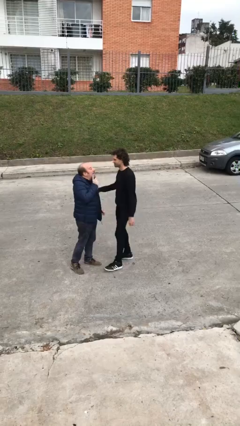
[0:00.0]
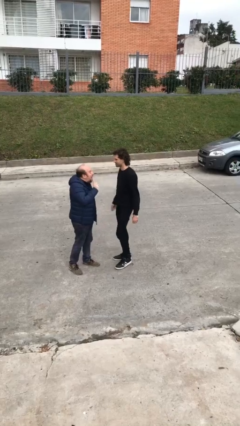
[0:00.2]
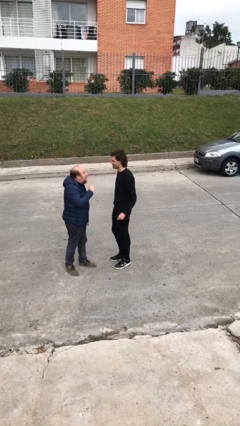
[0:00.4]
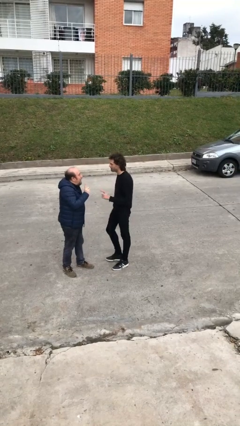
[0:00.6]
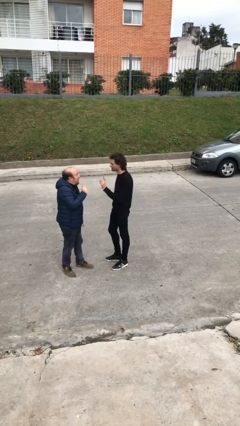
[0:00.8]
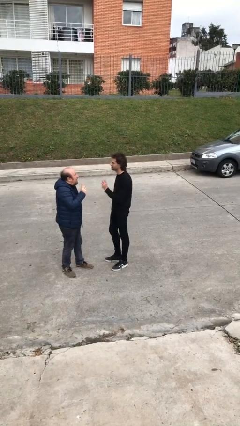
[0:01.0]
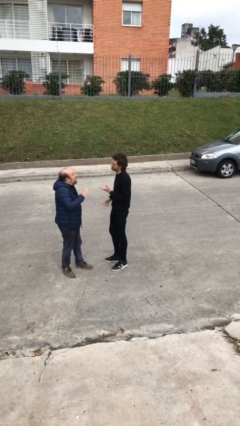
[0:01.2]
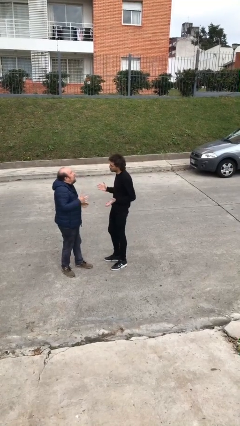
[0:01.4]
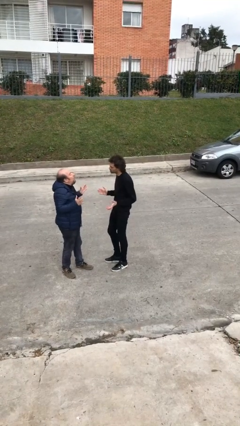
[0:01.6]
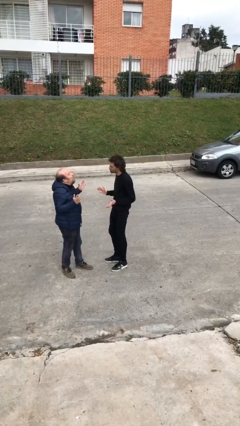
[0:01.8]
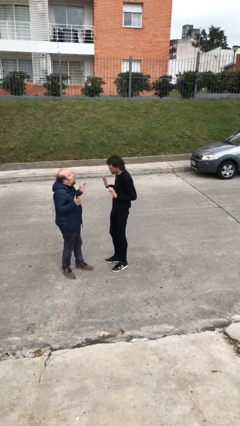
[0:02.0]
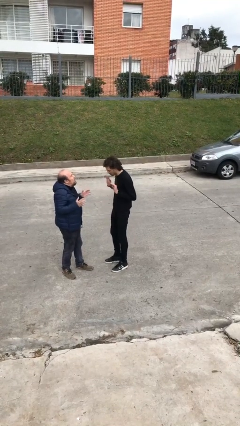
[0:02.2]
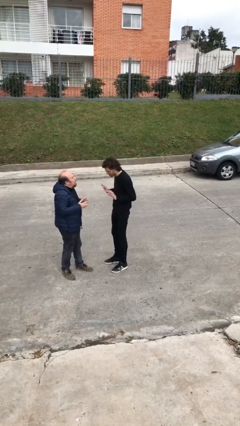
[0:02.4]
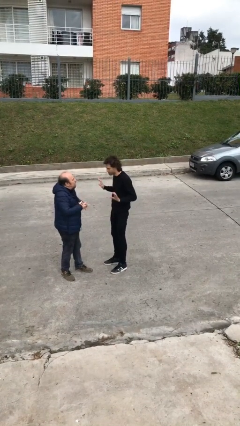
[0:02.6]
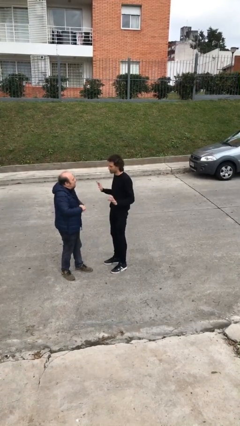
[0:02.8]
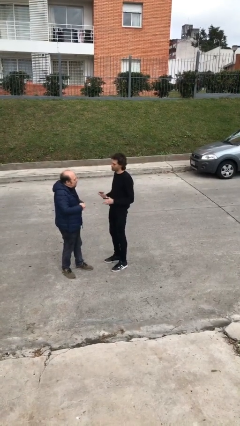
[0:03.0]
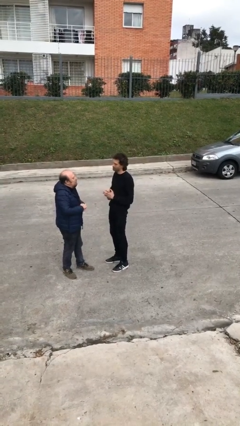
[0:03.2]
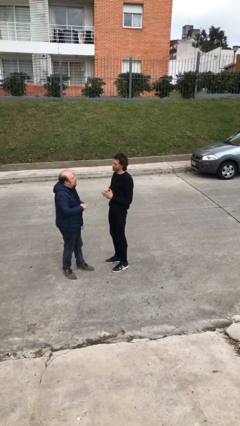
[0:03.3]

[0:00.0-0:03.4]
person talks to person

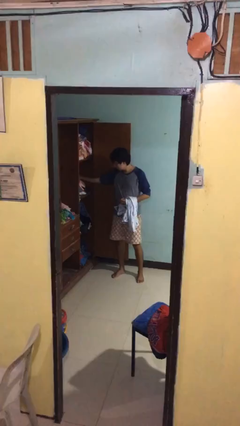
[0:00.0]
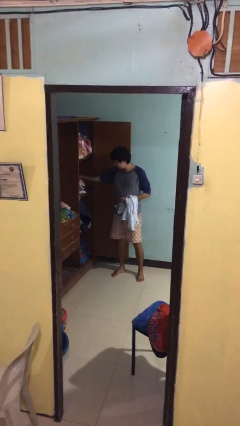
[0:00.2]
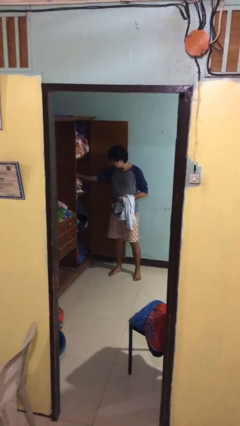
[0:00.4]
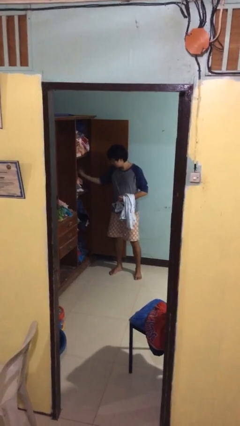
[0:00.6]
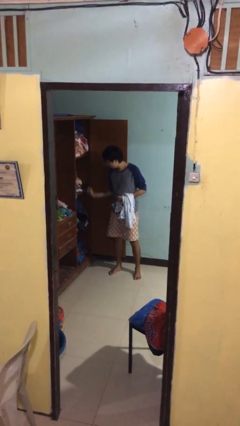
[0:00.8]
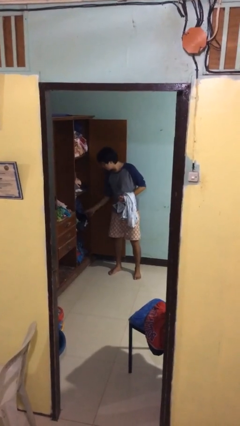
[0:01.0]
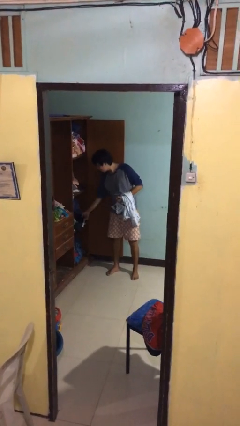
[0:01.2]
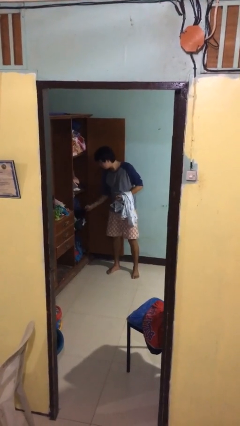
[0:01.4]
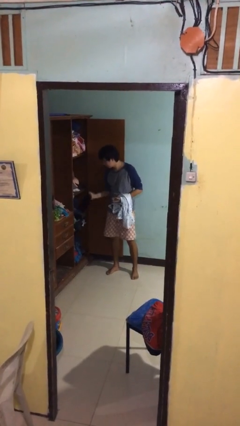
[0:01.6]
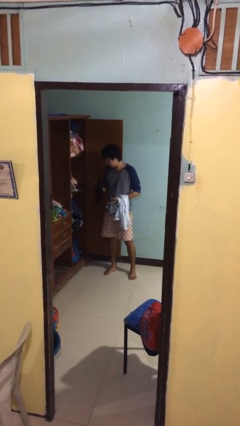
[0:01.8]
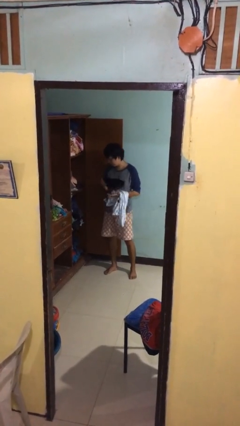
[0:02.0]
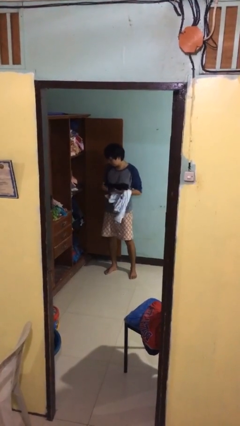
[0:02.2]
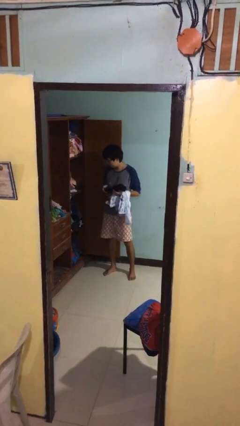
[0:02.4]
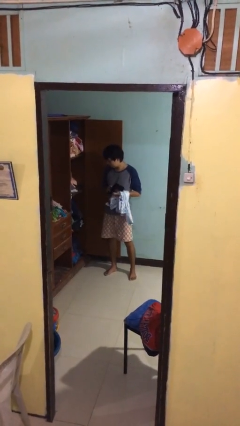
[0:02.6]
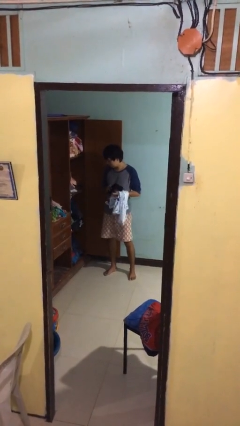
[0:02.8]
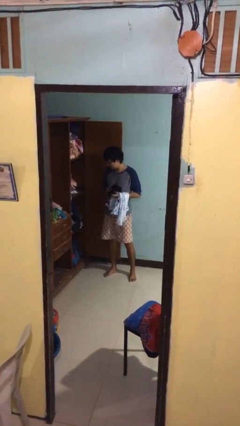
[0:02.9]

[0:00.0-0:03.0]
person takes clothes from dresser

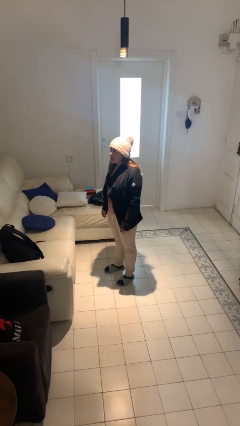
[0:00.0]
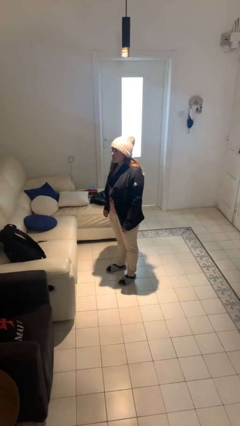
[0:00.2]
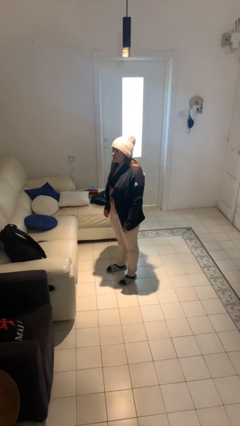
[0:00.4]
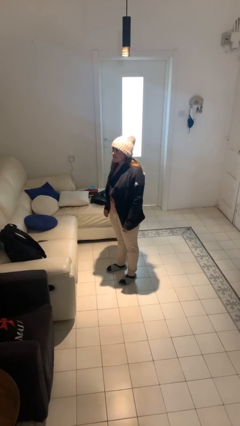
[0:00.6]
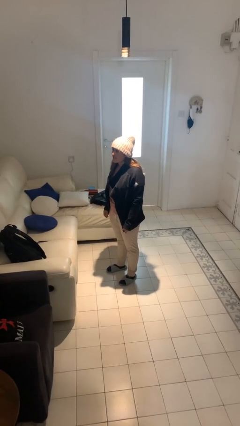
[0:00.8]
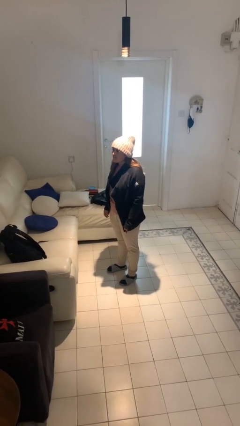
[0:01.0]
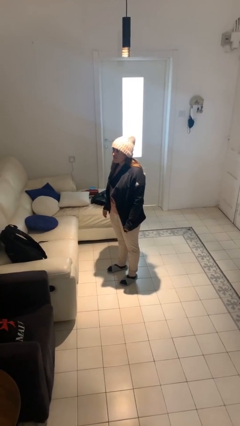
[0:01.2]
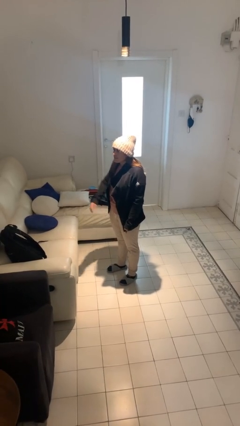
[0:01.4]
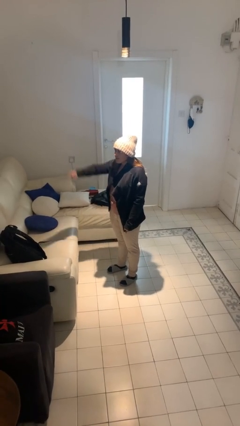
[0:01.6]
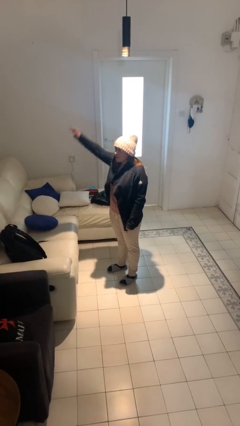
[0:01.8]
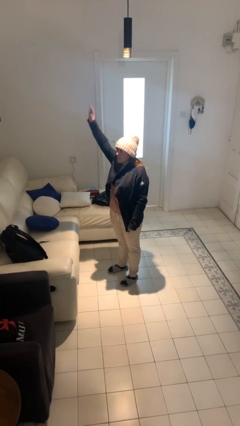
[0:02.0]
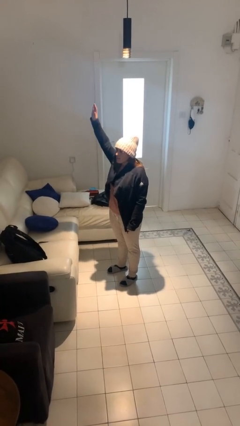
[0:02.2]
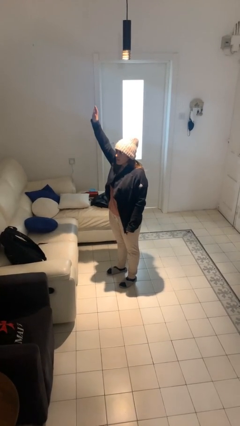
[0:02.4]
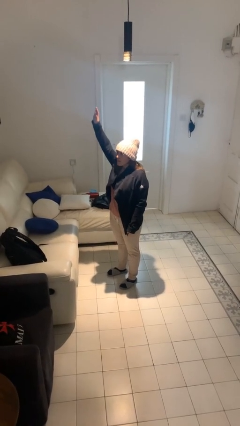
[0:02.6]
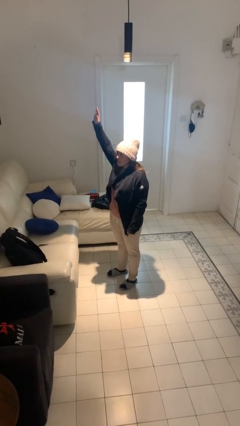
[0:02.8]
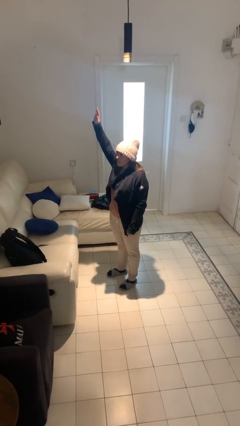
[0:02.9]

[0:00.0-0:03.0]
person gestures raise hand

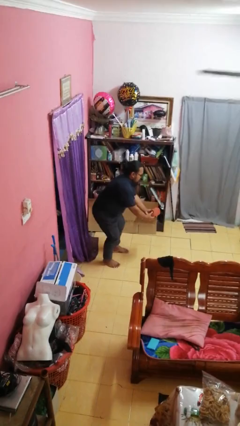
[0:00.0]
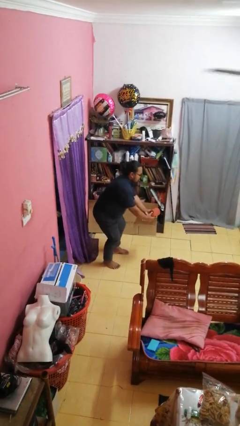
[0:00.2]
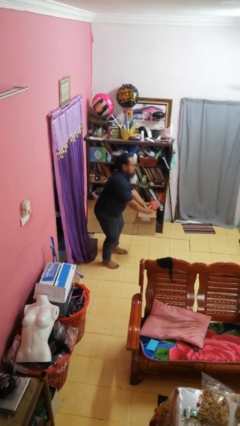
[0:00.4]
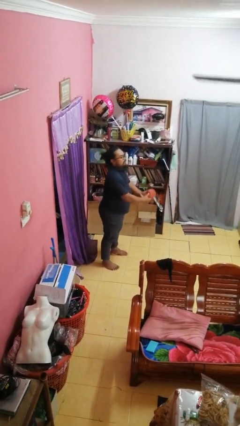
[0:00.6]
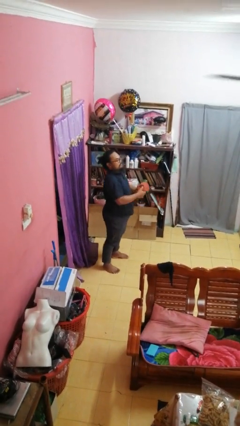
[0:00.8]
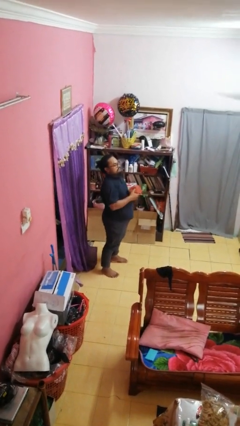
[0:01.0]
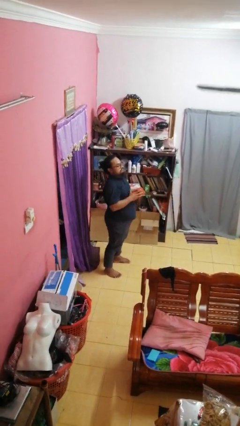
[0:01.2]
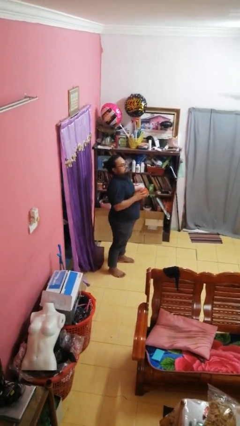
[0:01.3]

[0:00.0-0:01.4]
person catches dropped object

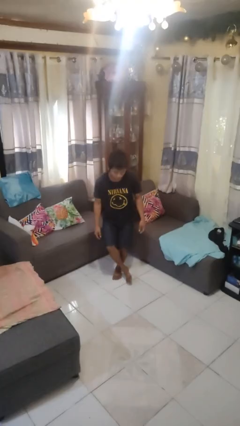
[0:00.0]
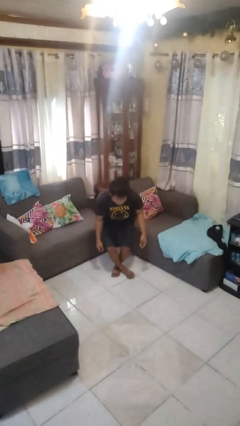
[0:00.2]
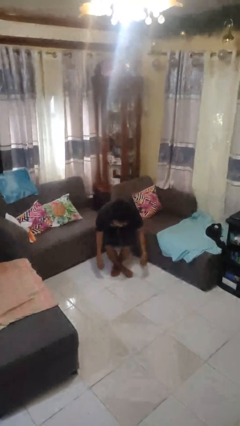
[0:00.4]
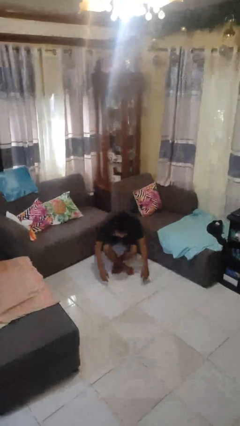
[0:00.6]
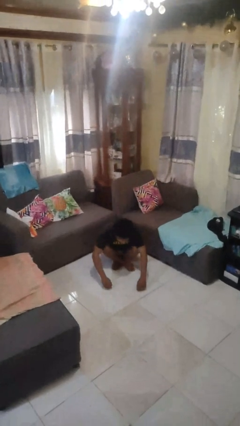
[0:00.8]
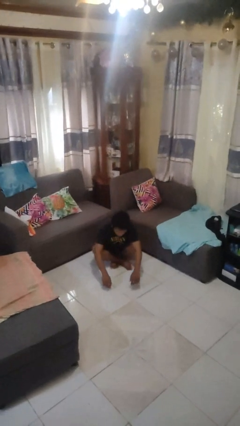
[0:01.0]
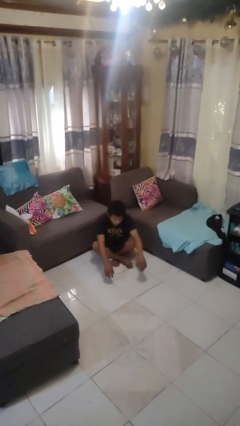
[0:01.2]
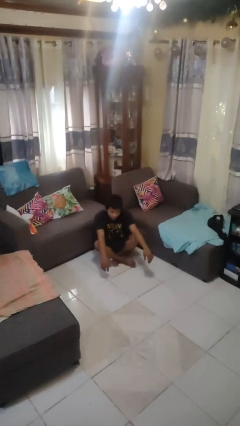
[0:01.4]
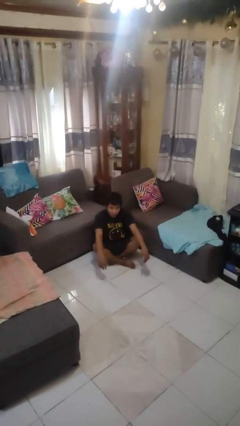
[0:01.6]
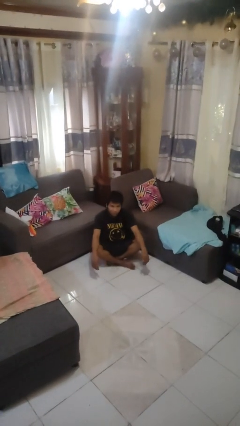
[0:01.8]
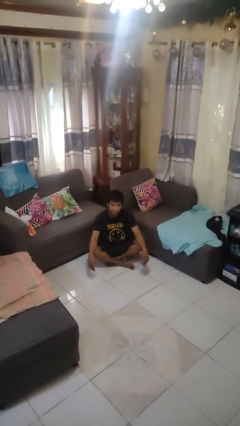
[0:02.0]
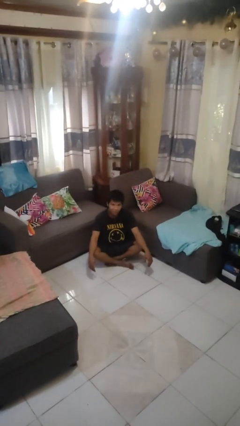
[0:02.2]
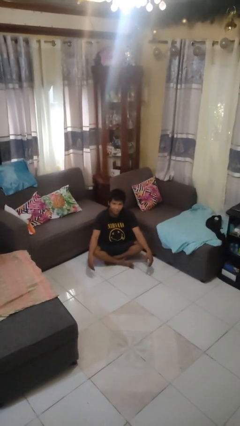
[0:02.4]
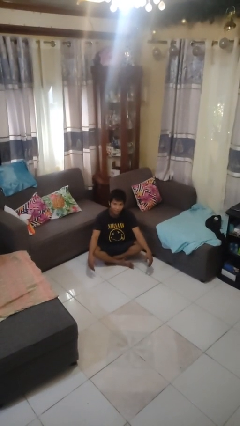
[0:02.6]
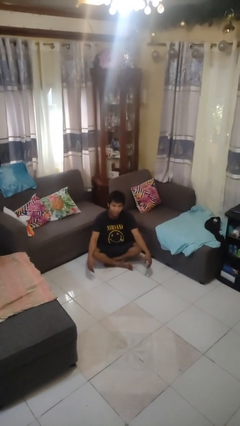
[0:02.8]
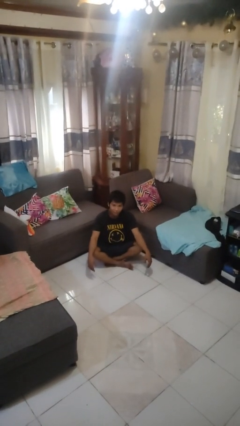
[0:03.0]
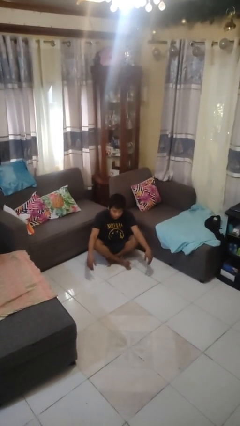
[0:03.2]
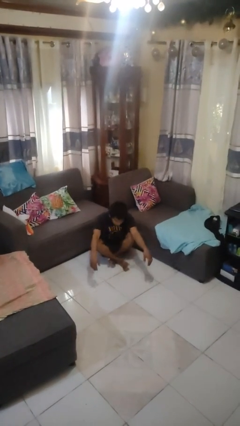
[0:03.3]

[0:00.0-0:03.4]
person sits crisscross

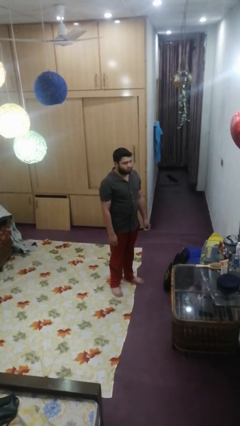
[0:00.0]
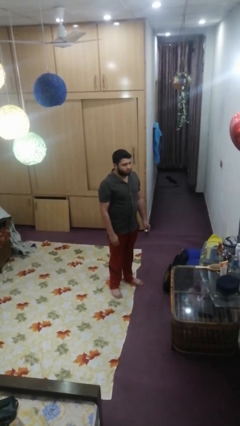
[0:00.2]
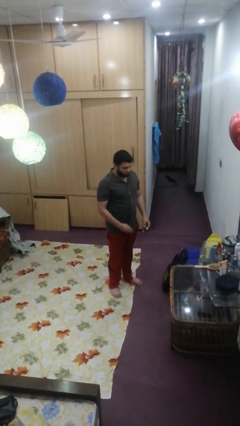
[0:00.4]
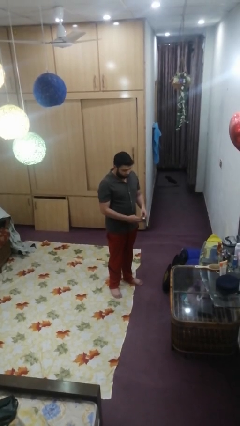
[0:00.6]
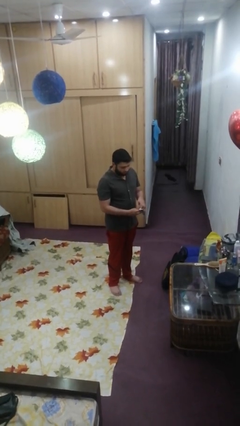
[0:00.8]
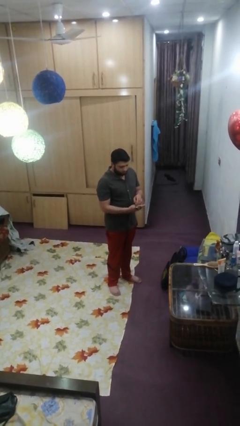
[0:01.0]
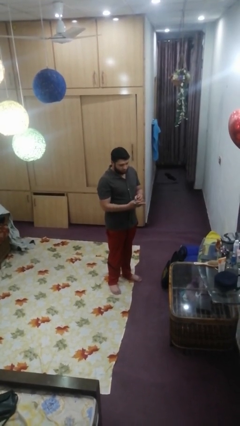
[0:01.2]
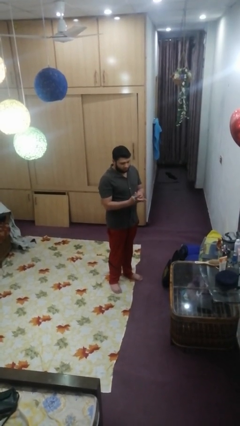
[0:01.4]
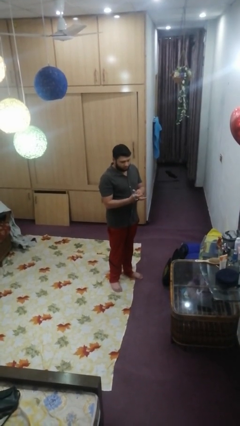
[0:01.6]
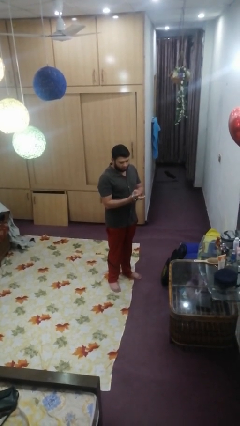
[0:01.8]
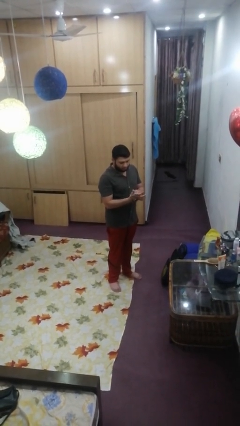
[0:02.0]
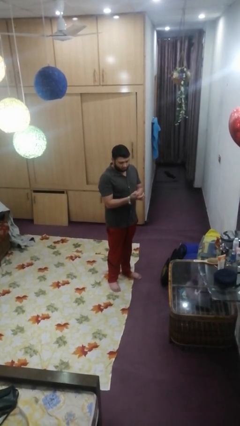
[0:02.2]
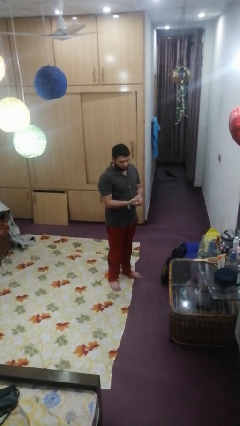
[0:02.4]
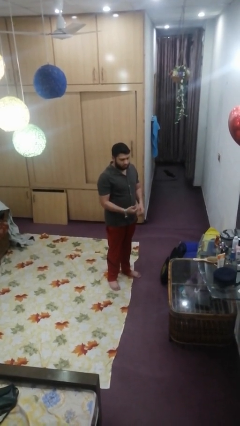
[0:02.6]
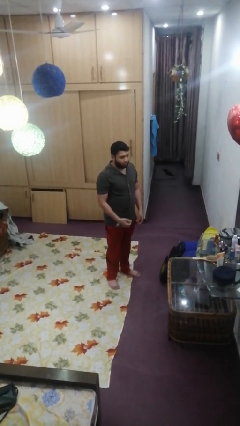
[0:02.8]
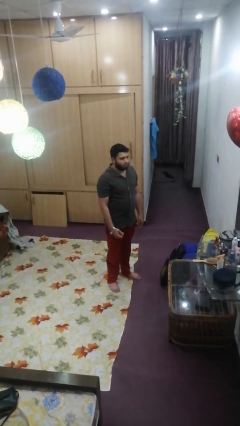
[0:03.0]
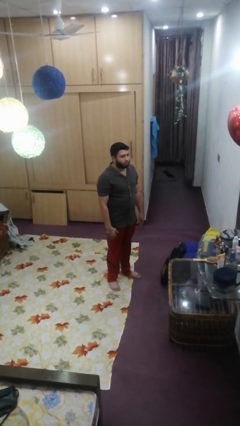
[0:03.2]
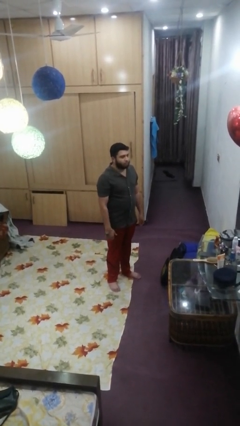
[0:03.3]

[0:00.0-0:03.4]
person puts on wristwatch
